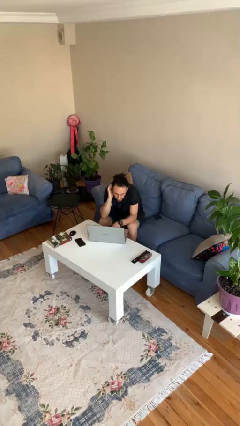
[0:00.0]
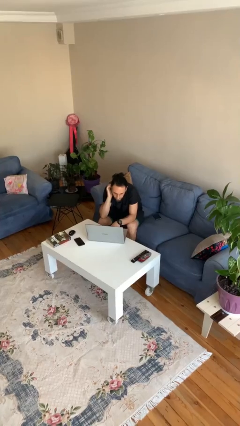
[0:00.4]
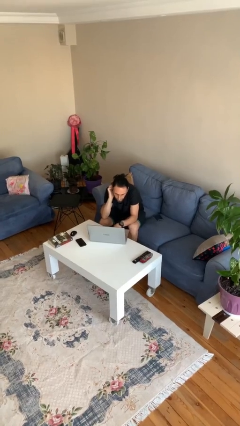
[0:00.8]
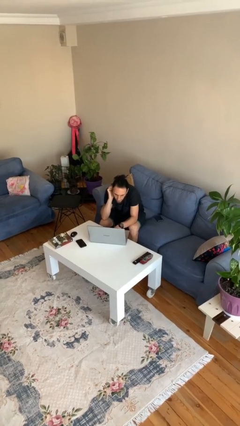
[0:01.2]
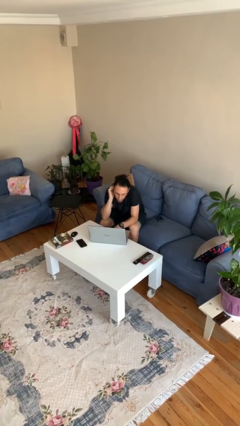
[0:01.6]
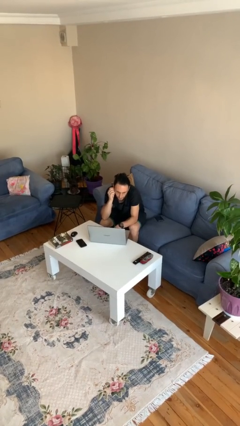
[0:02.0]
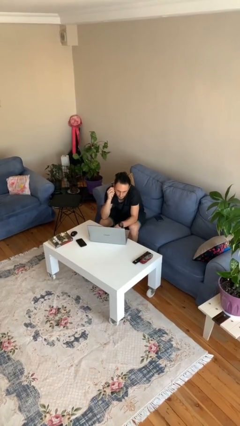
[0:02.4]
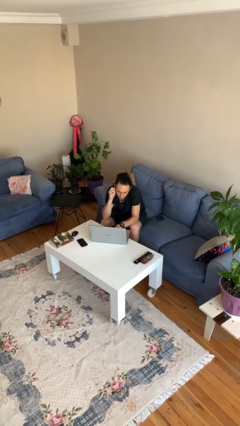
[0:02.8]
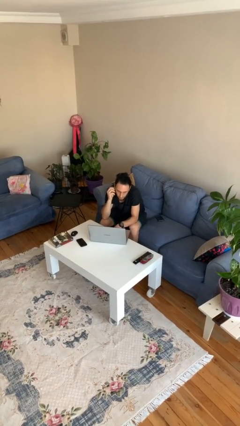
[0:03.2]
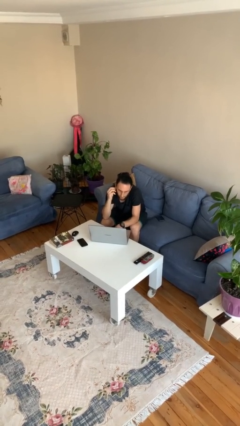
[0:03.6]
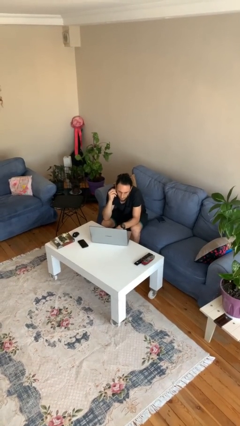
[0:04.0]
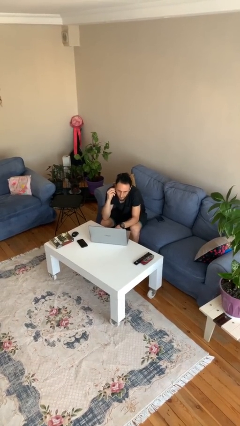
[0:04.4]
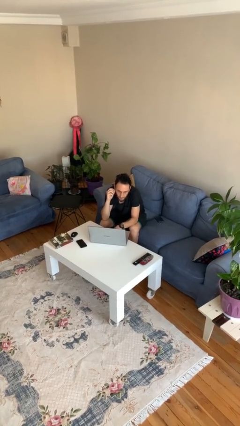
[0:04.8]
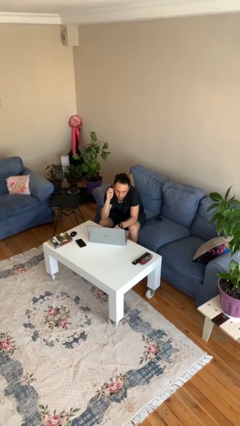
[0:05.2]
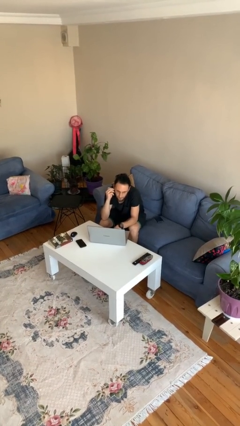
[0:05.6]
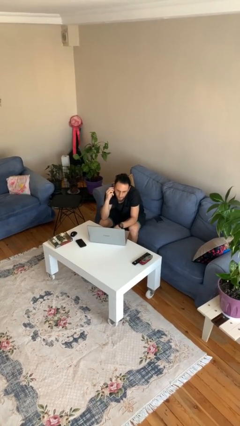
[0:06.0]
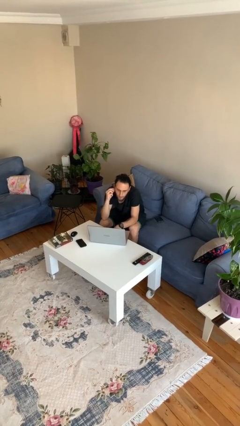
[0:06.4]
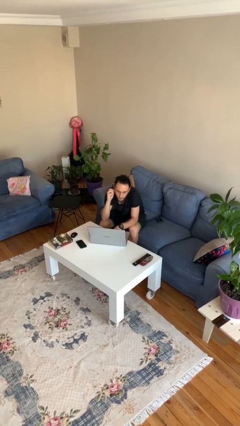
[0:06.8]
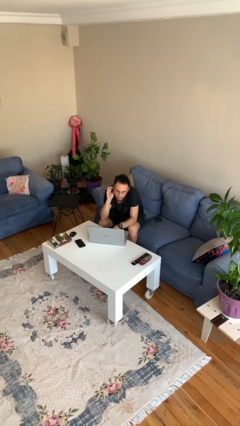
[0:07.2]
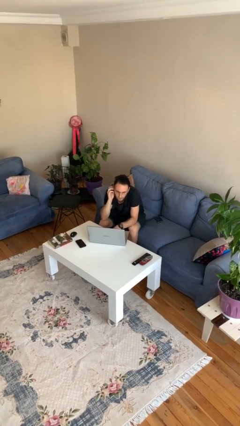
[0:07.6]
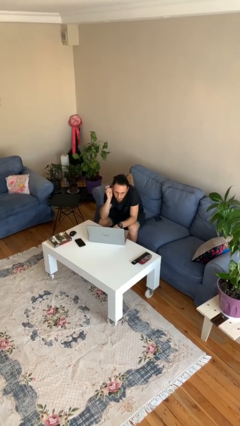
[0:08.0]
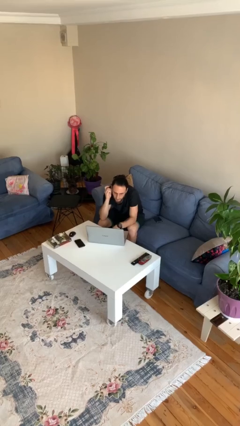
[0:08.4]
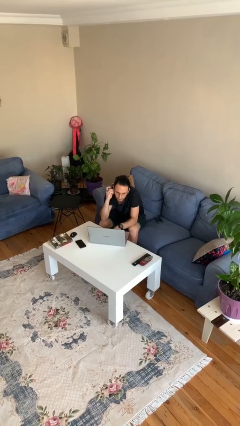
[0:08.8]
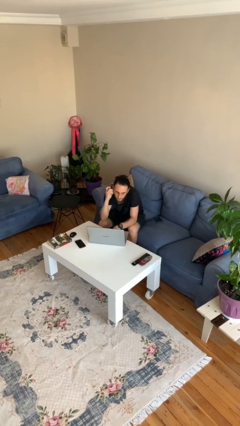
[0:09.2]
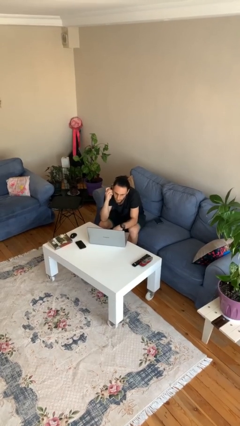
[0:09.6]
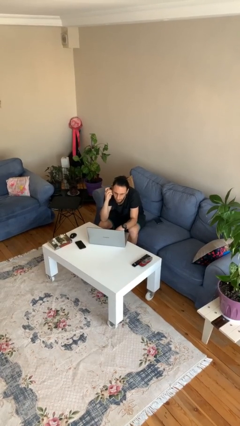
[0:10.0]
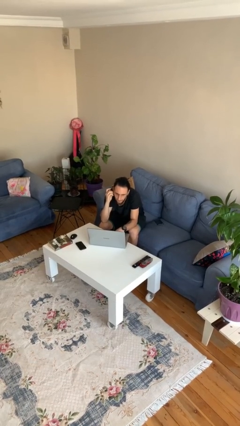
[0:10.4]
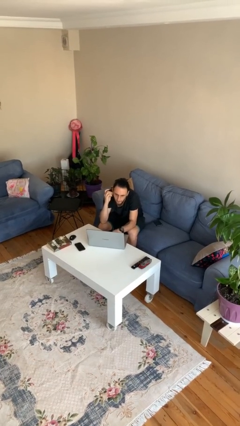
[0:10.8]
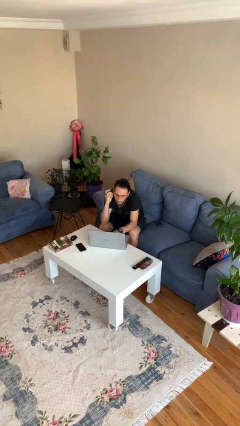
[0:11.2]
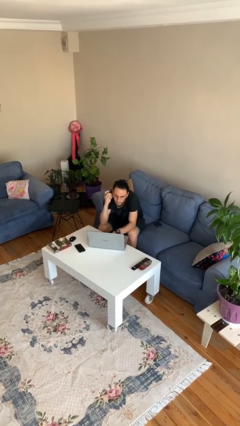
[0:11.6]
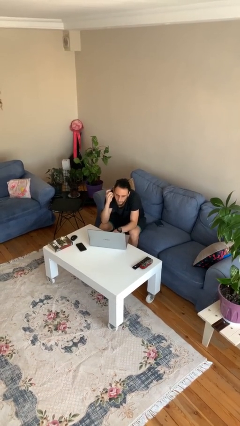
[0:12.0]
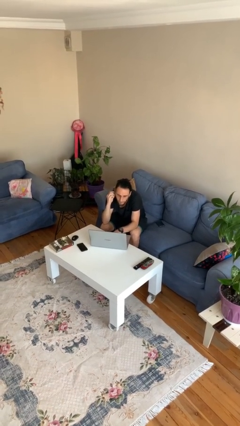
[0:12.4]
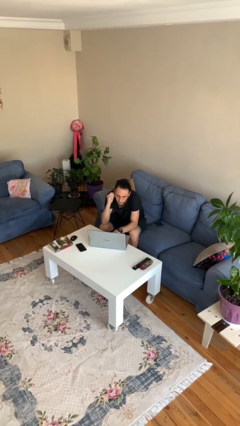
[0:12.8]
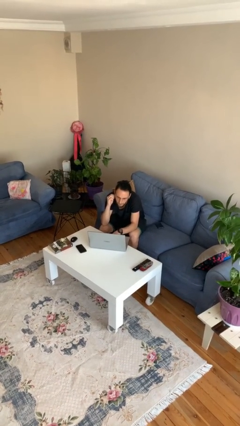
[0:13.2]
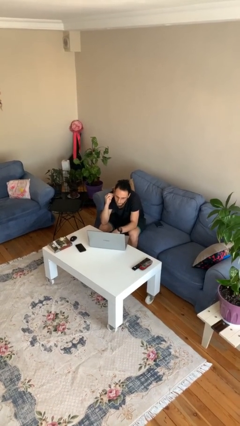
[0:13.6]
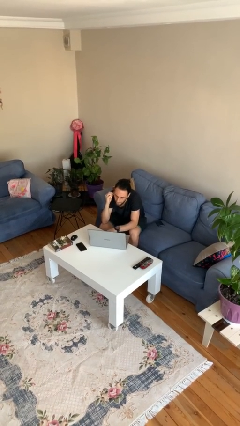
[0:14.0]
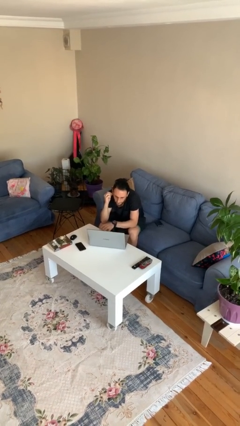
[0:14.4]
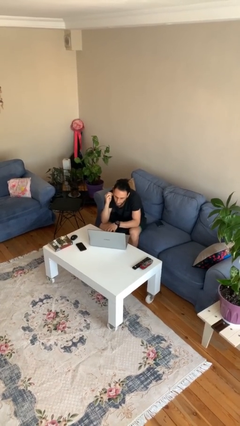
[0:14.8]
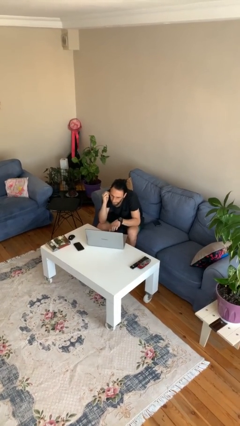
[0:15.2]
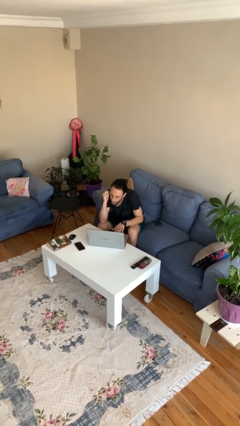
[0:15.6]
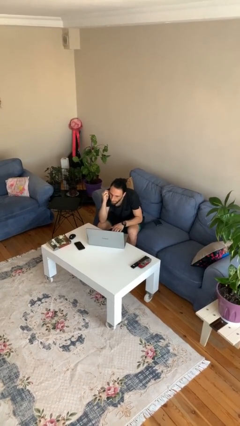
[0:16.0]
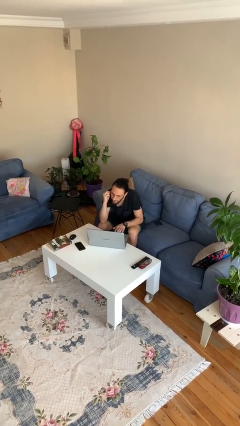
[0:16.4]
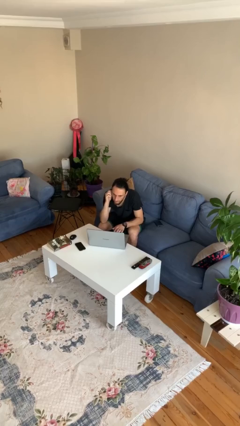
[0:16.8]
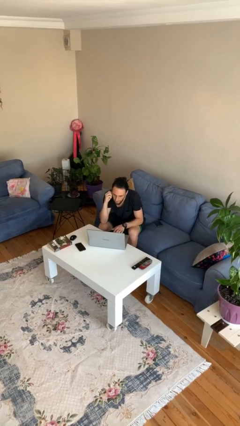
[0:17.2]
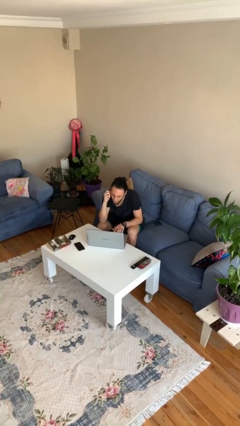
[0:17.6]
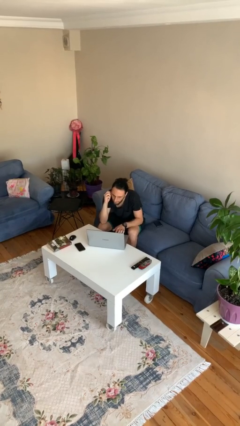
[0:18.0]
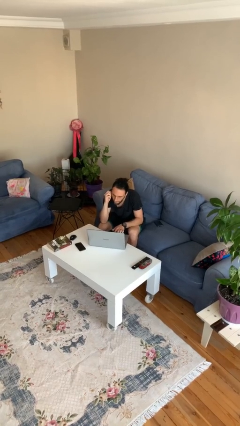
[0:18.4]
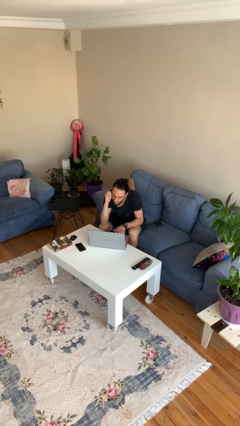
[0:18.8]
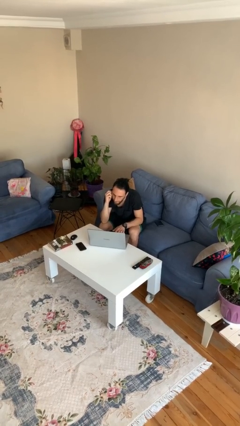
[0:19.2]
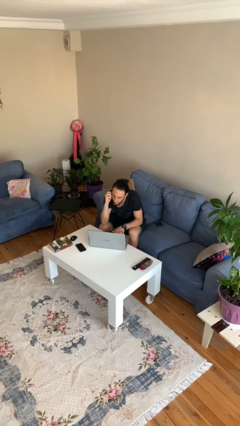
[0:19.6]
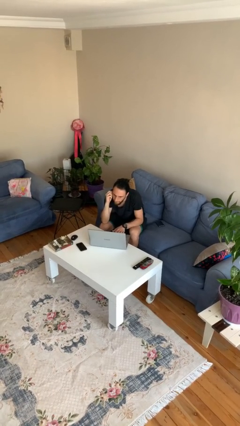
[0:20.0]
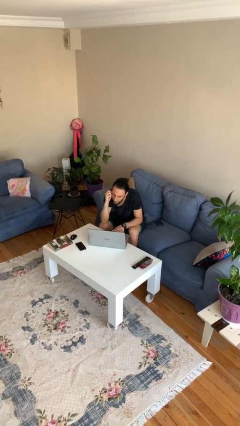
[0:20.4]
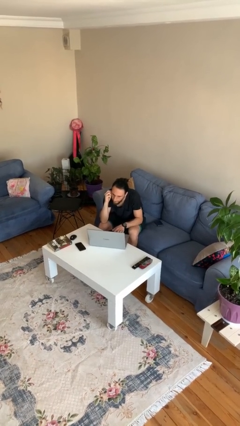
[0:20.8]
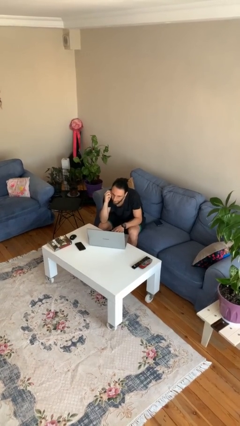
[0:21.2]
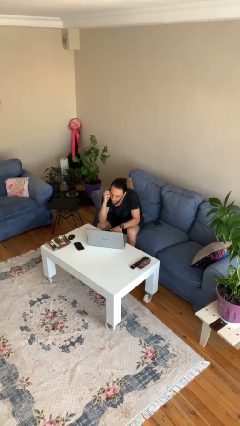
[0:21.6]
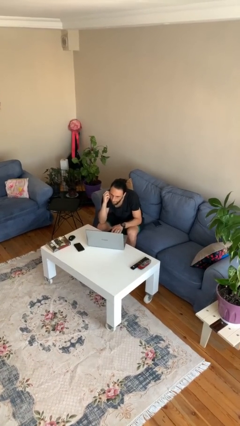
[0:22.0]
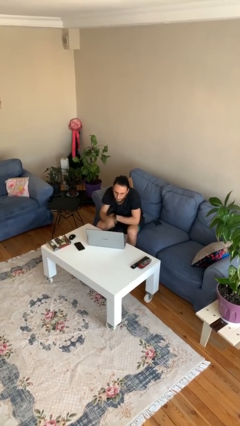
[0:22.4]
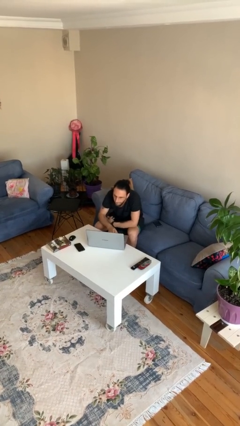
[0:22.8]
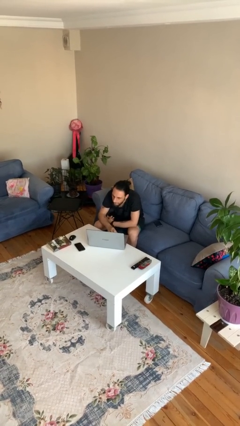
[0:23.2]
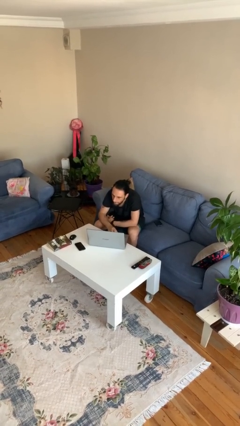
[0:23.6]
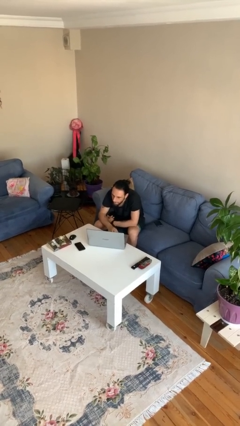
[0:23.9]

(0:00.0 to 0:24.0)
person interacts with laptop

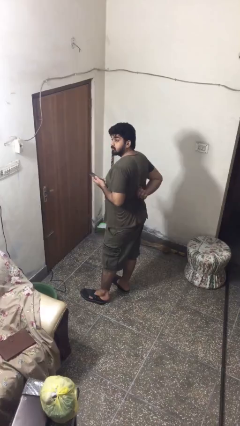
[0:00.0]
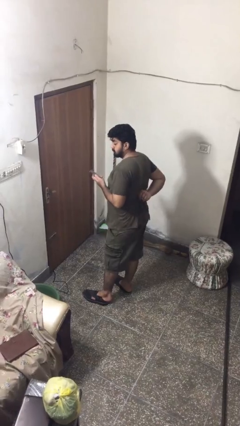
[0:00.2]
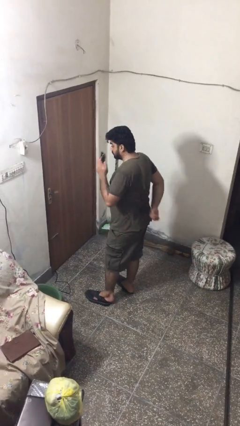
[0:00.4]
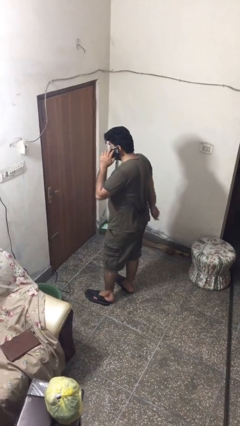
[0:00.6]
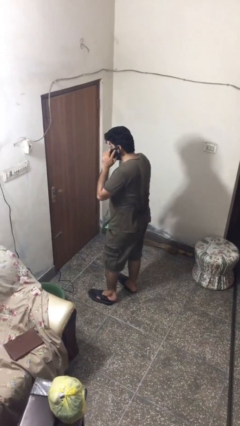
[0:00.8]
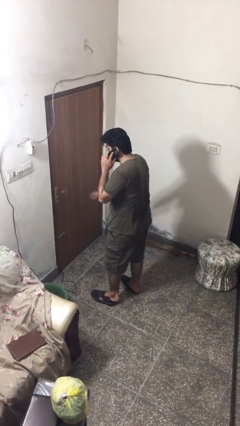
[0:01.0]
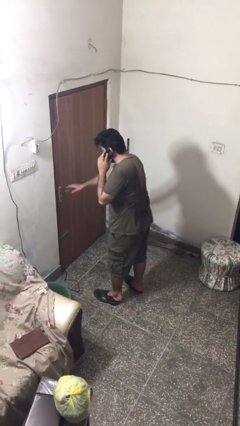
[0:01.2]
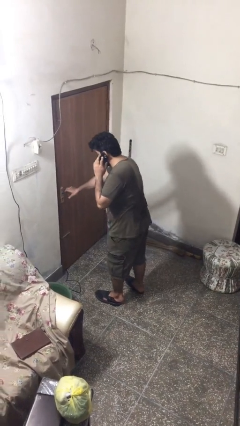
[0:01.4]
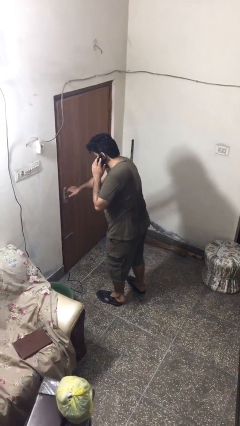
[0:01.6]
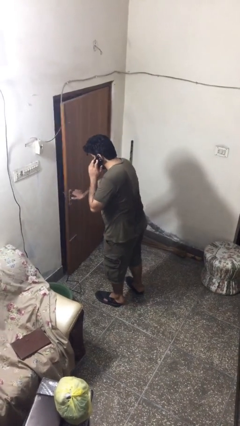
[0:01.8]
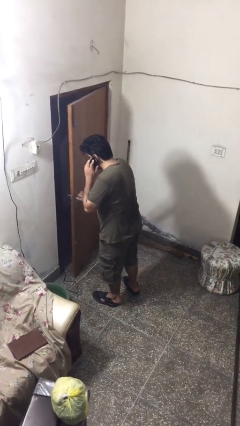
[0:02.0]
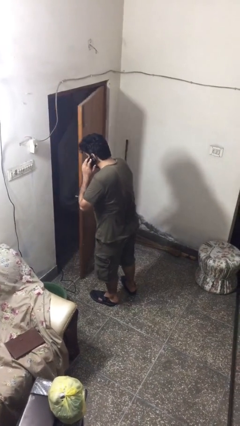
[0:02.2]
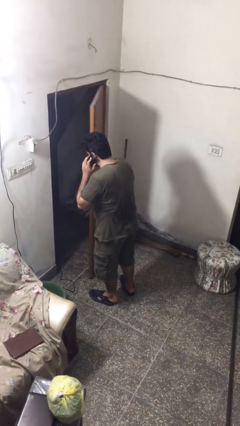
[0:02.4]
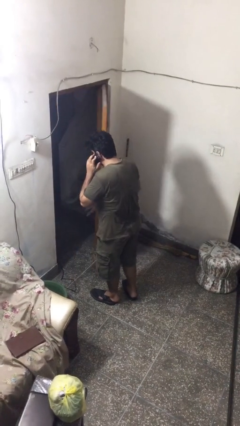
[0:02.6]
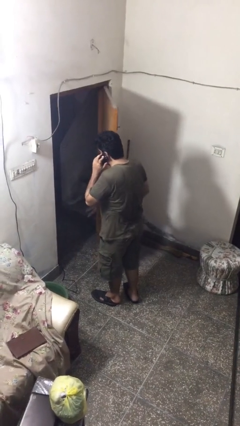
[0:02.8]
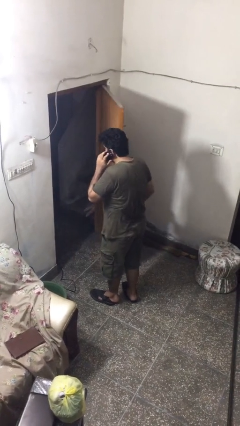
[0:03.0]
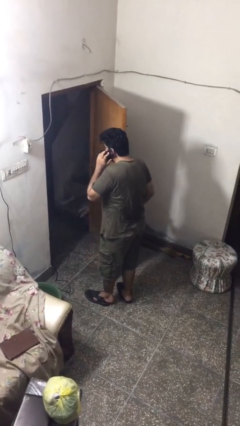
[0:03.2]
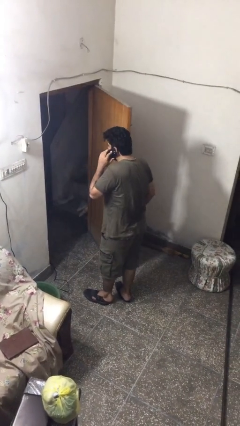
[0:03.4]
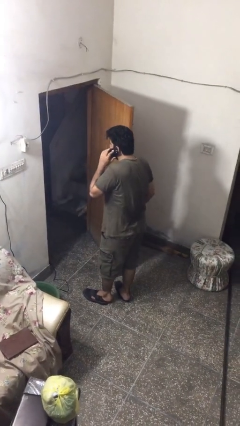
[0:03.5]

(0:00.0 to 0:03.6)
person opens facility door

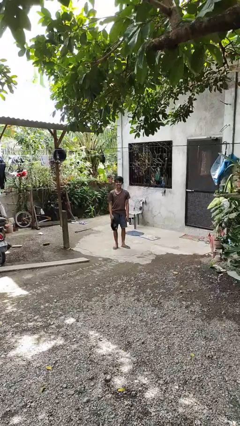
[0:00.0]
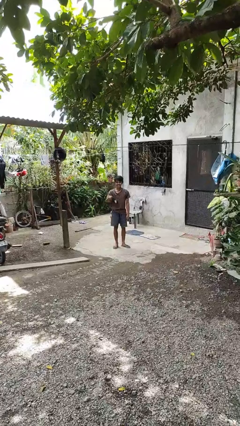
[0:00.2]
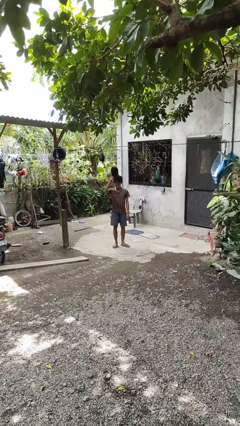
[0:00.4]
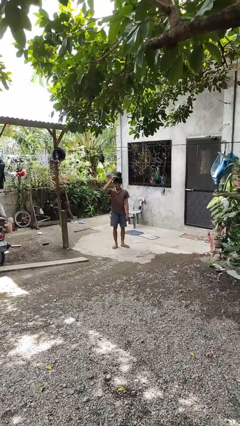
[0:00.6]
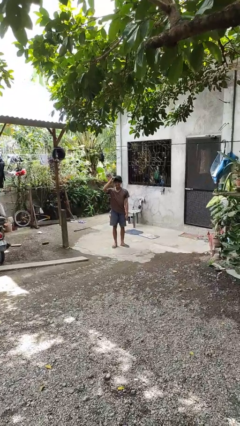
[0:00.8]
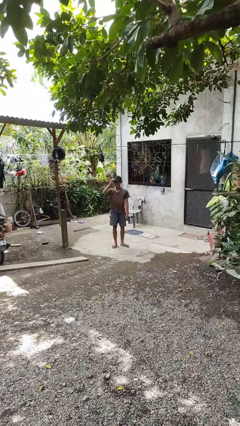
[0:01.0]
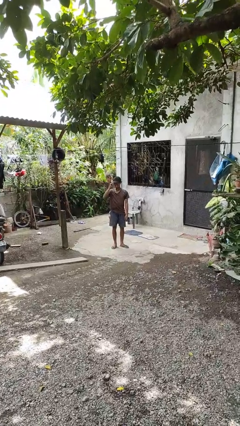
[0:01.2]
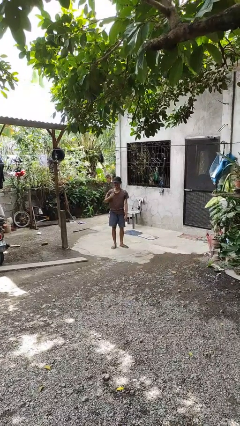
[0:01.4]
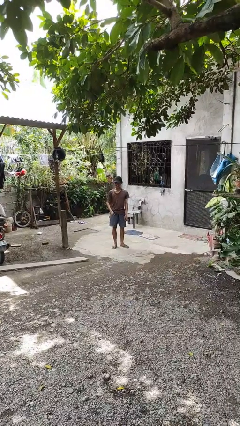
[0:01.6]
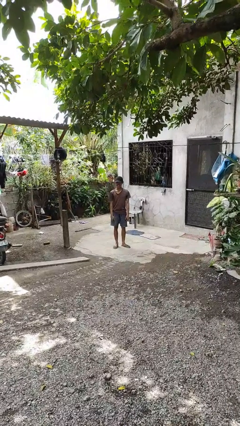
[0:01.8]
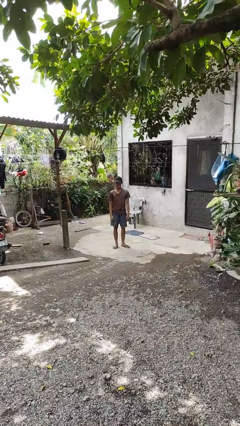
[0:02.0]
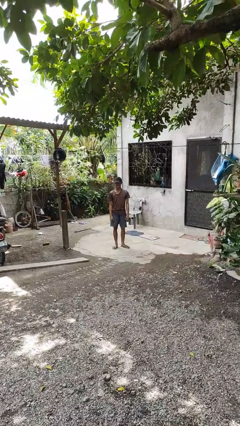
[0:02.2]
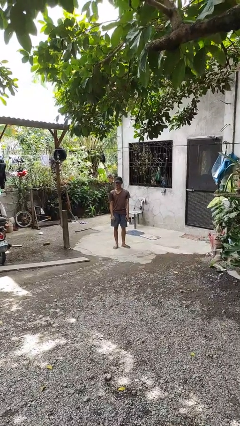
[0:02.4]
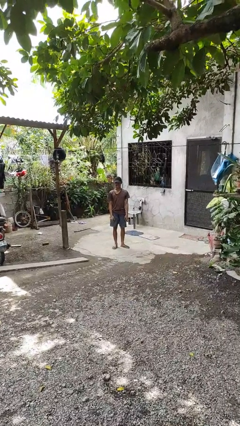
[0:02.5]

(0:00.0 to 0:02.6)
person puts on hat

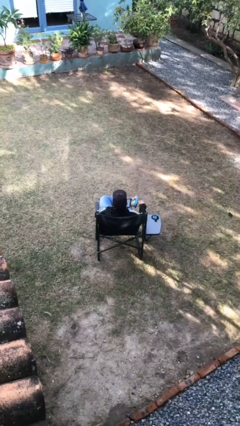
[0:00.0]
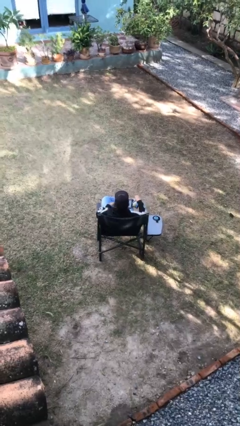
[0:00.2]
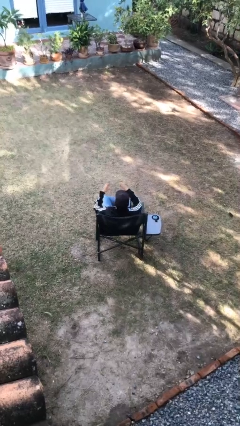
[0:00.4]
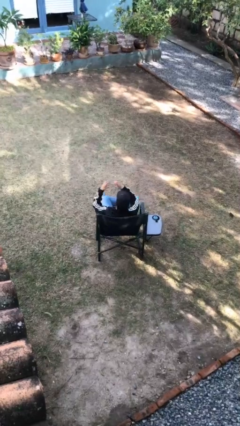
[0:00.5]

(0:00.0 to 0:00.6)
person gestures heart
